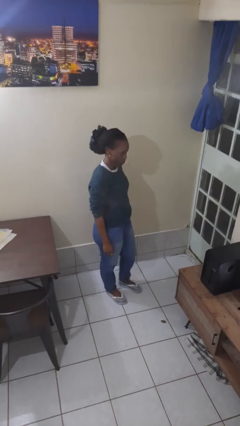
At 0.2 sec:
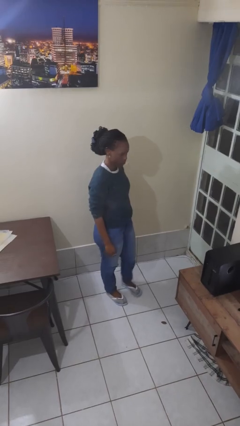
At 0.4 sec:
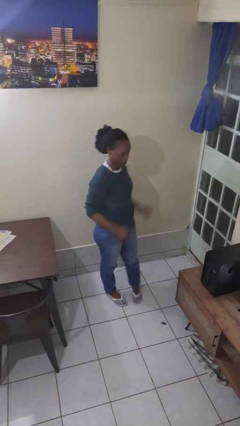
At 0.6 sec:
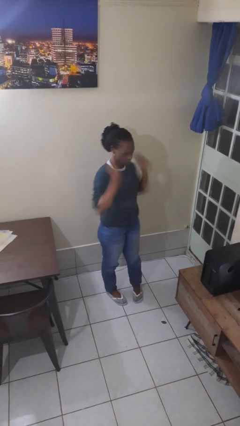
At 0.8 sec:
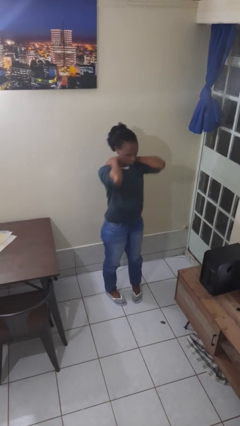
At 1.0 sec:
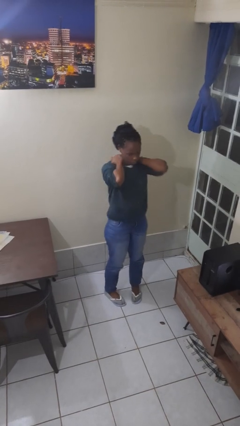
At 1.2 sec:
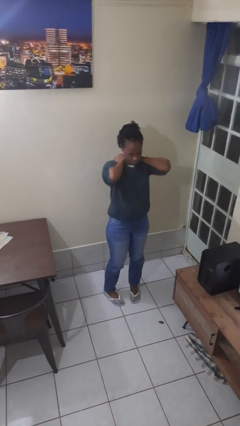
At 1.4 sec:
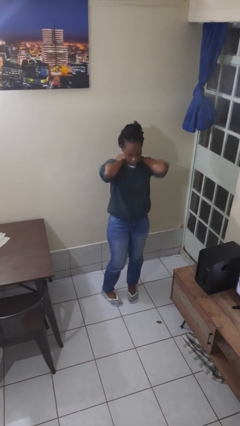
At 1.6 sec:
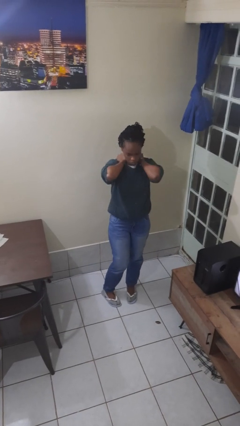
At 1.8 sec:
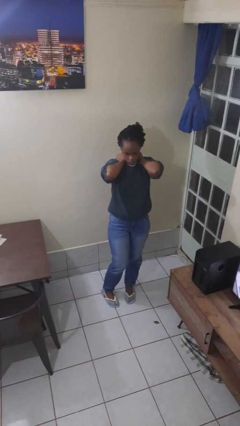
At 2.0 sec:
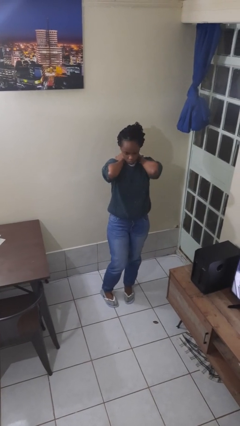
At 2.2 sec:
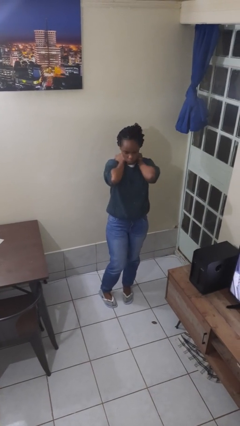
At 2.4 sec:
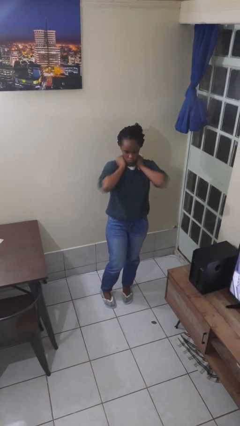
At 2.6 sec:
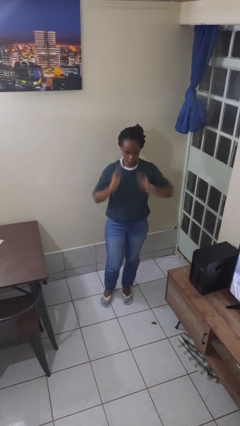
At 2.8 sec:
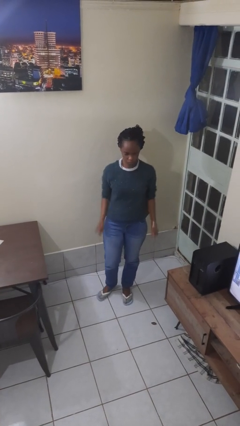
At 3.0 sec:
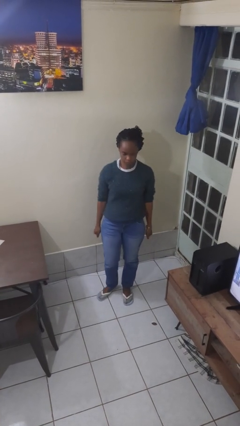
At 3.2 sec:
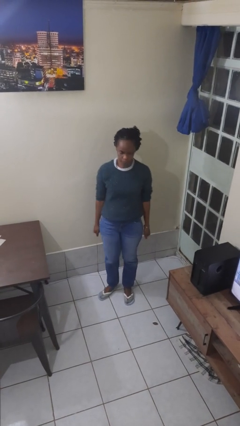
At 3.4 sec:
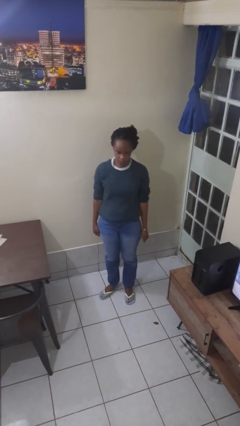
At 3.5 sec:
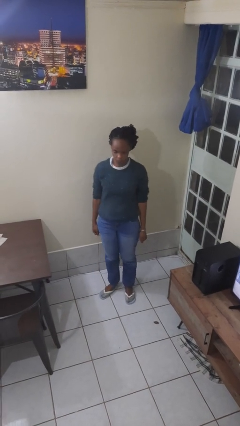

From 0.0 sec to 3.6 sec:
person rubs neck

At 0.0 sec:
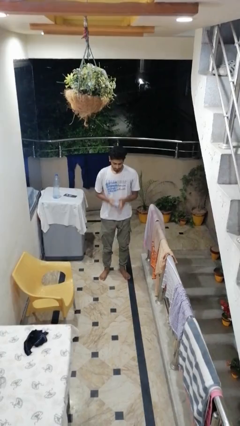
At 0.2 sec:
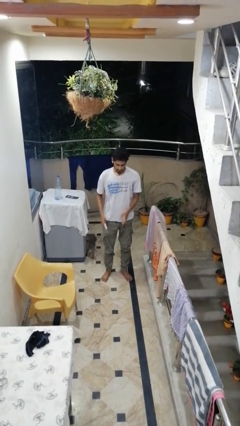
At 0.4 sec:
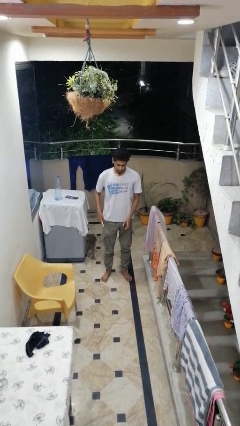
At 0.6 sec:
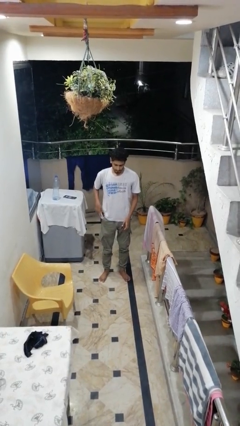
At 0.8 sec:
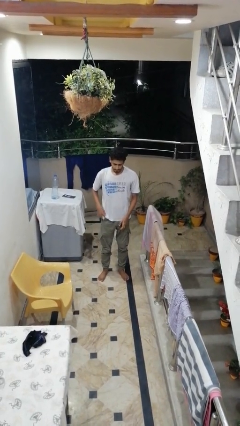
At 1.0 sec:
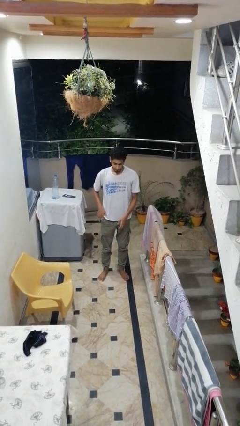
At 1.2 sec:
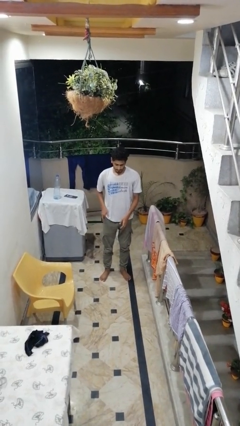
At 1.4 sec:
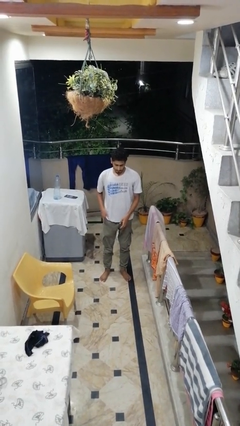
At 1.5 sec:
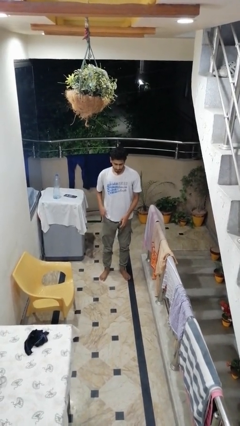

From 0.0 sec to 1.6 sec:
person puts phone into pocket

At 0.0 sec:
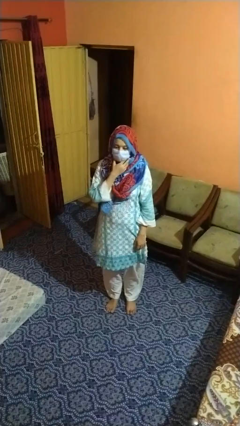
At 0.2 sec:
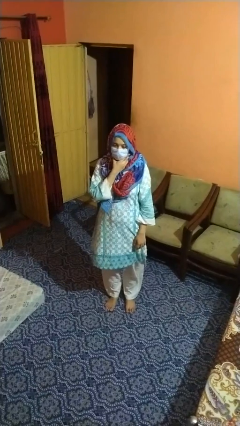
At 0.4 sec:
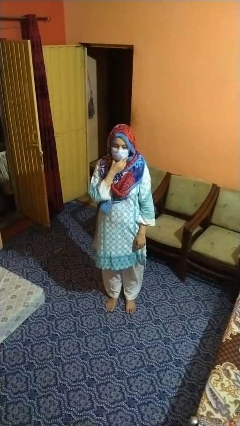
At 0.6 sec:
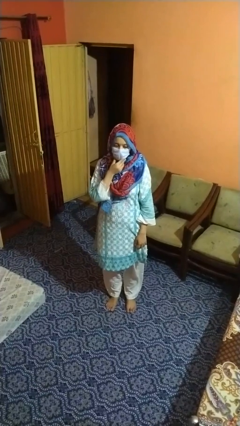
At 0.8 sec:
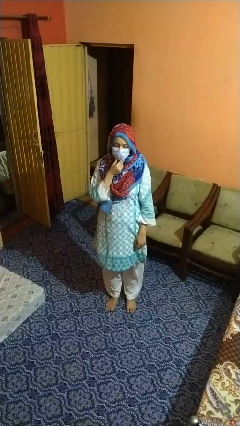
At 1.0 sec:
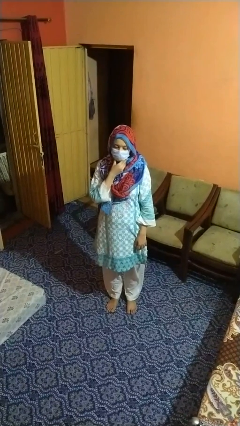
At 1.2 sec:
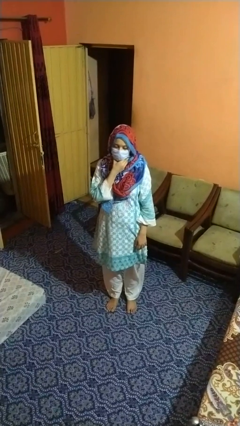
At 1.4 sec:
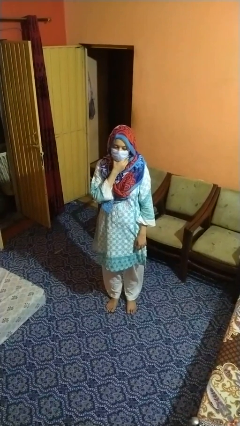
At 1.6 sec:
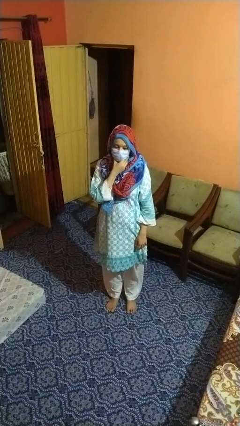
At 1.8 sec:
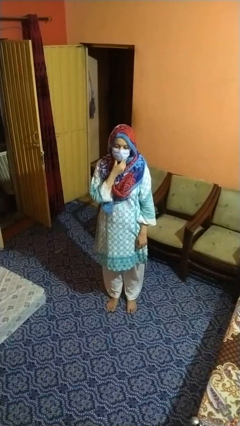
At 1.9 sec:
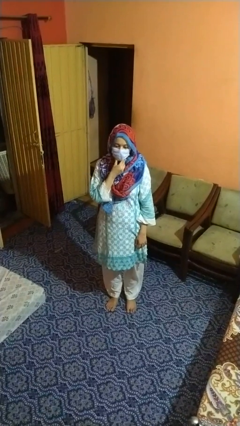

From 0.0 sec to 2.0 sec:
person strokes chin

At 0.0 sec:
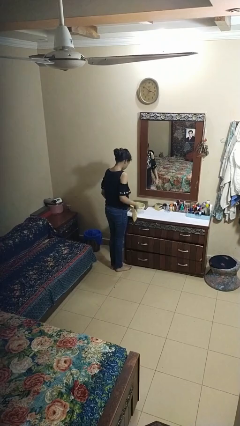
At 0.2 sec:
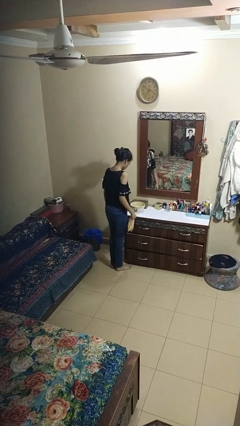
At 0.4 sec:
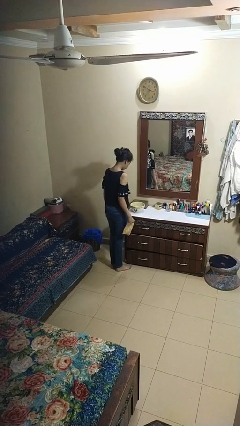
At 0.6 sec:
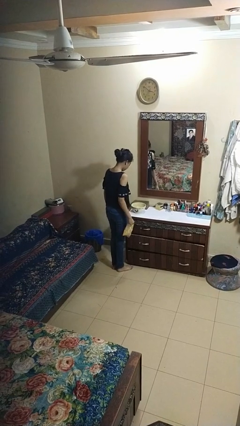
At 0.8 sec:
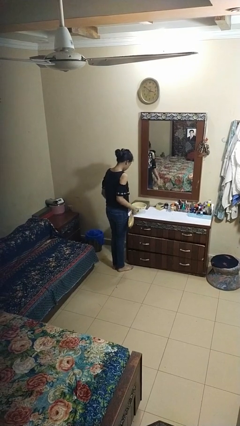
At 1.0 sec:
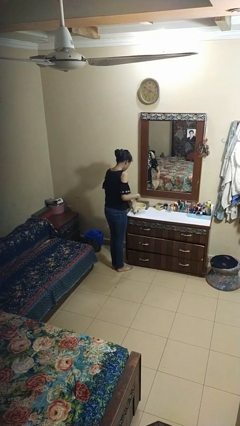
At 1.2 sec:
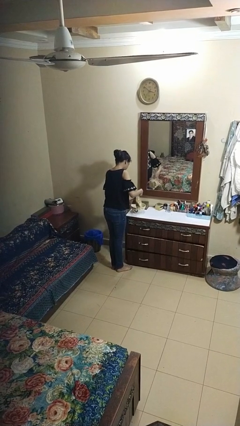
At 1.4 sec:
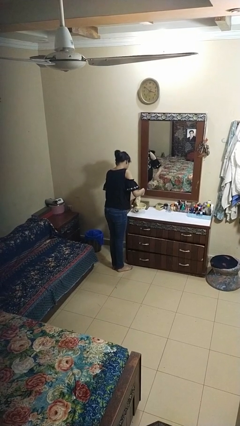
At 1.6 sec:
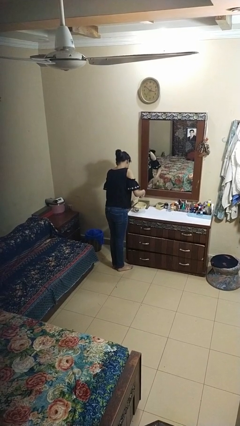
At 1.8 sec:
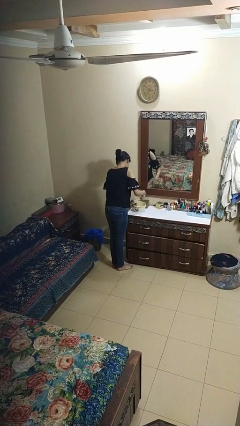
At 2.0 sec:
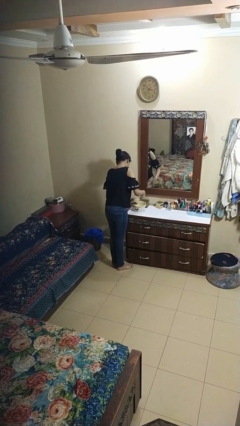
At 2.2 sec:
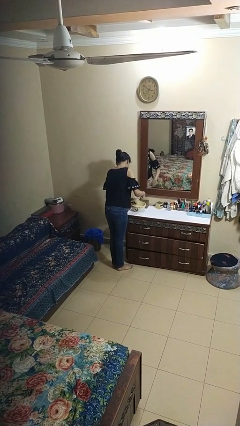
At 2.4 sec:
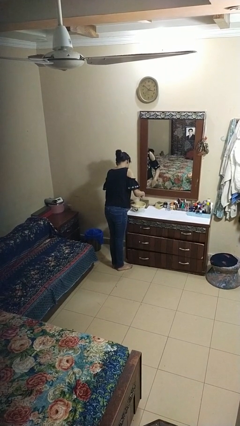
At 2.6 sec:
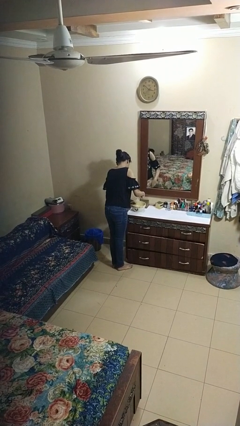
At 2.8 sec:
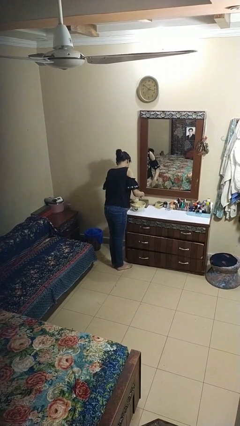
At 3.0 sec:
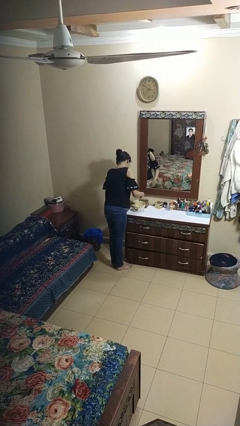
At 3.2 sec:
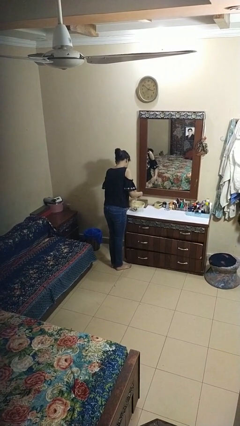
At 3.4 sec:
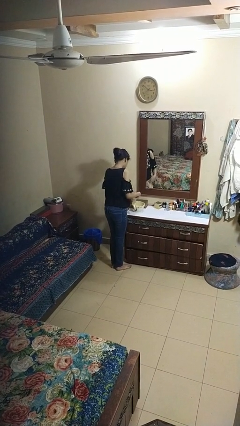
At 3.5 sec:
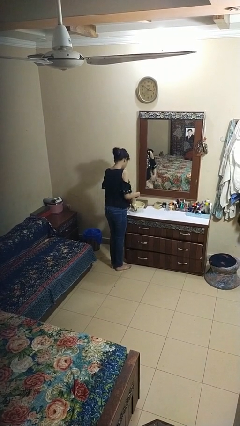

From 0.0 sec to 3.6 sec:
person pours into bowl

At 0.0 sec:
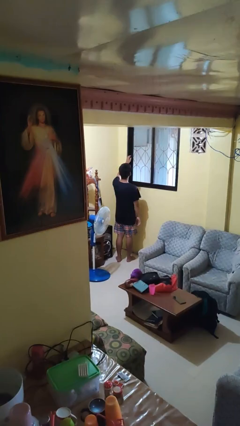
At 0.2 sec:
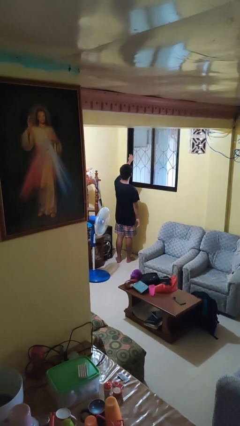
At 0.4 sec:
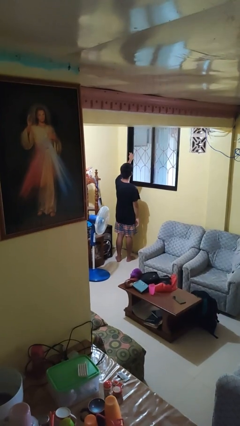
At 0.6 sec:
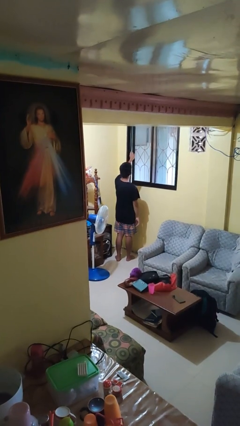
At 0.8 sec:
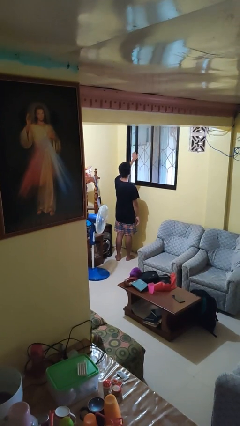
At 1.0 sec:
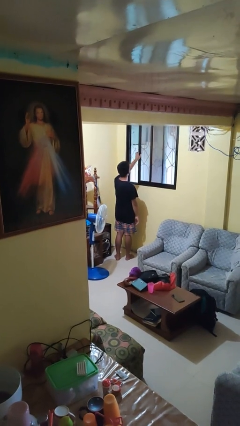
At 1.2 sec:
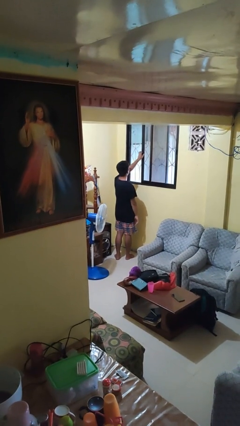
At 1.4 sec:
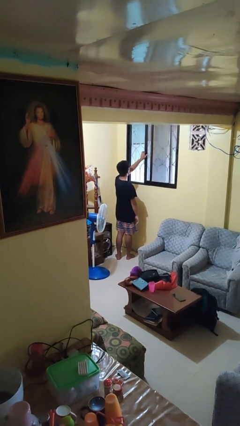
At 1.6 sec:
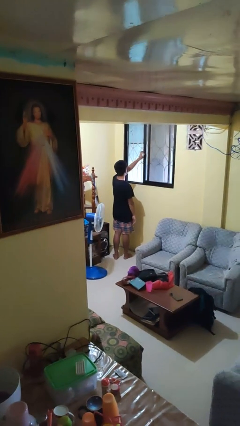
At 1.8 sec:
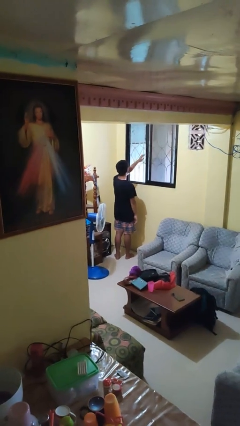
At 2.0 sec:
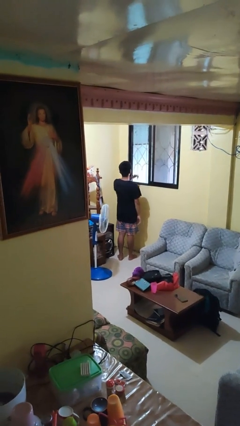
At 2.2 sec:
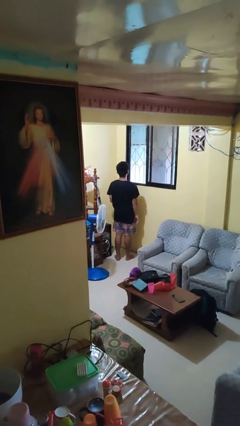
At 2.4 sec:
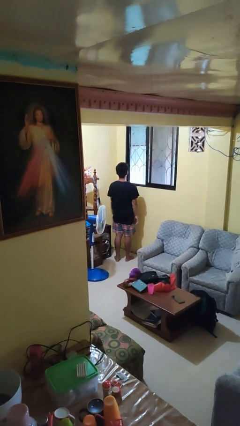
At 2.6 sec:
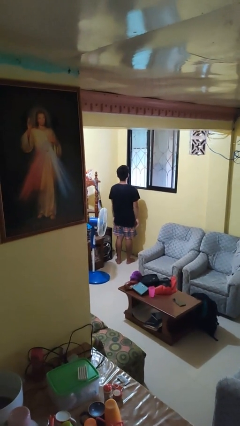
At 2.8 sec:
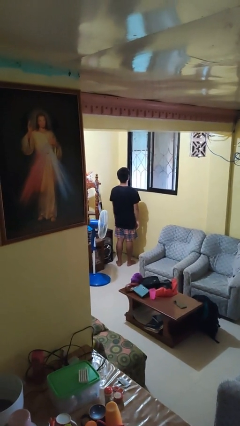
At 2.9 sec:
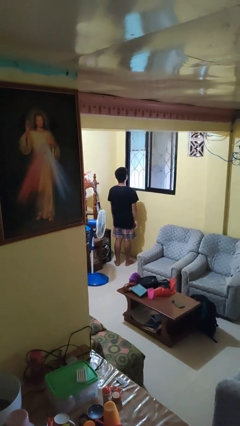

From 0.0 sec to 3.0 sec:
person opens home window

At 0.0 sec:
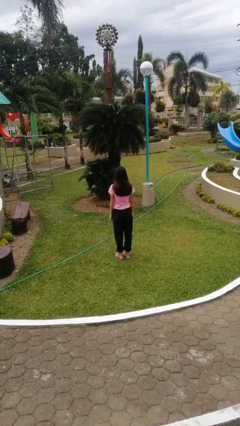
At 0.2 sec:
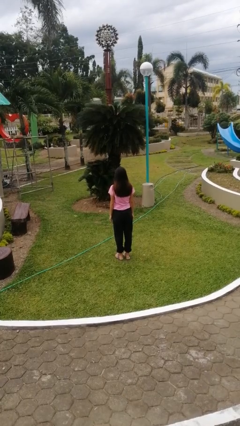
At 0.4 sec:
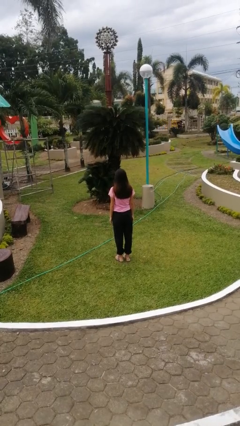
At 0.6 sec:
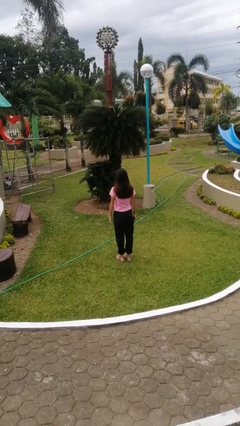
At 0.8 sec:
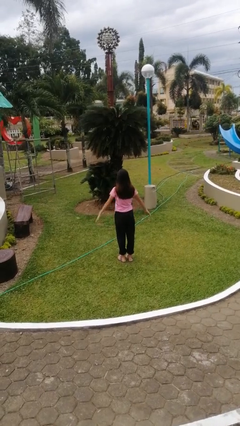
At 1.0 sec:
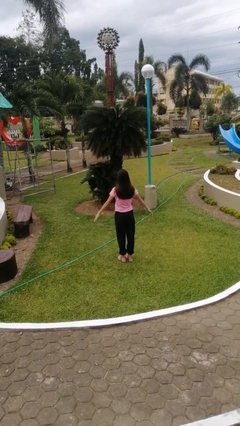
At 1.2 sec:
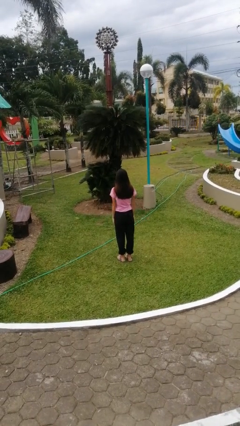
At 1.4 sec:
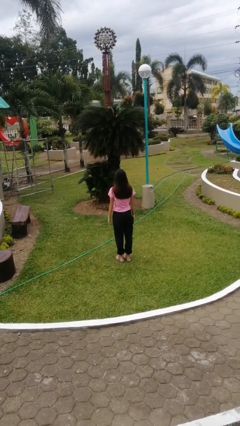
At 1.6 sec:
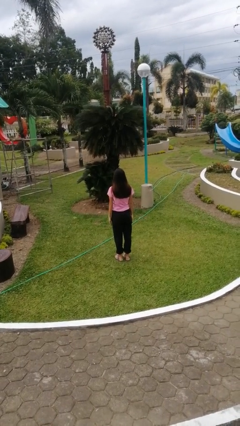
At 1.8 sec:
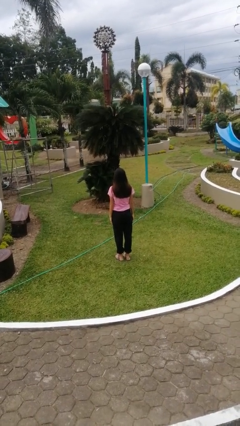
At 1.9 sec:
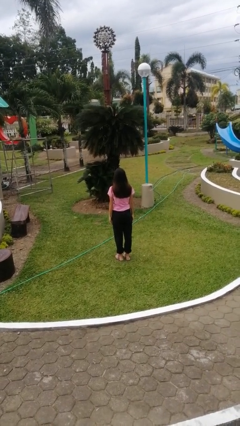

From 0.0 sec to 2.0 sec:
person slaps hands on thighs

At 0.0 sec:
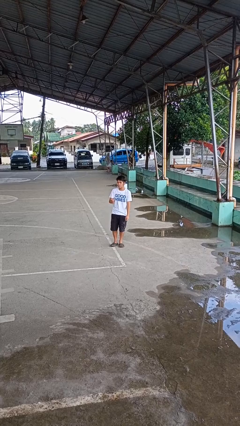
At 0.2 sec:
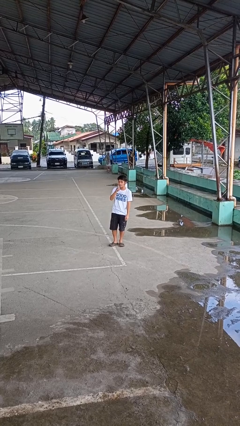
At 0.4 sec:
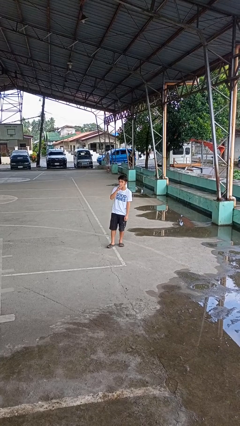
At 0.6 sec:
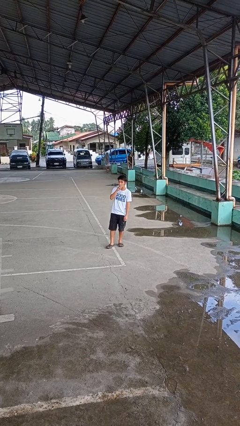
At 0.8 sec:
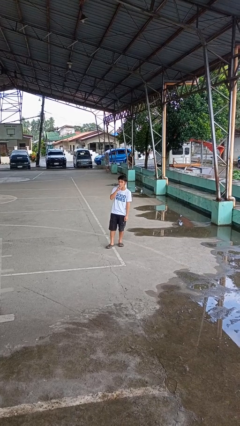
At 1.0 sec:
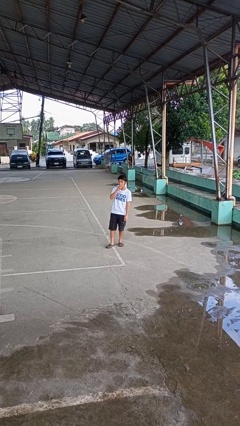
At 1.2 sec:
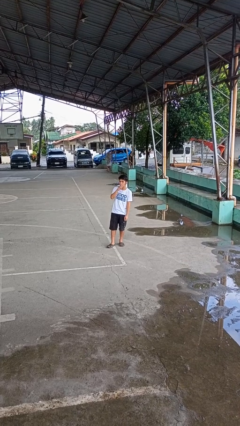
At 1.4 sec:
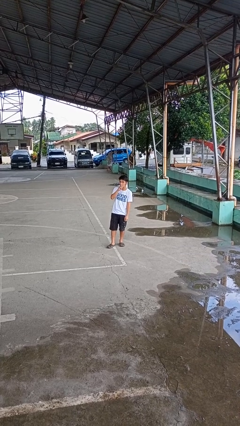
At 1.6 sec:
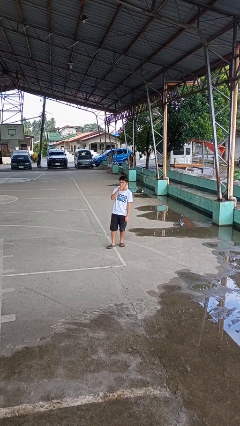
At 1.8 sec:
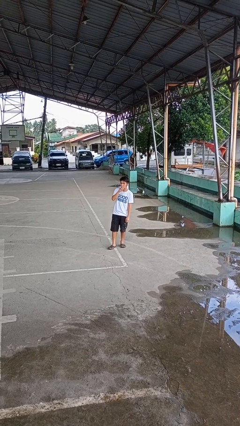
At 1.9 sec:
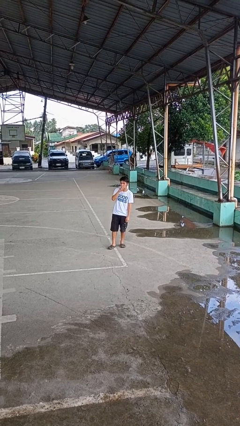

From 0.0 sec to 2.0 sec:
person gestures be quiet
